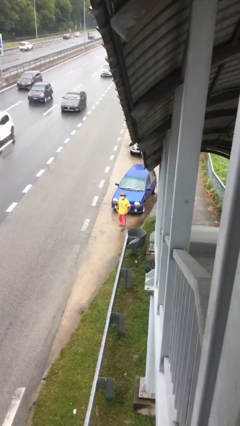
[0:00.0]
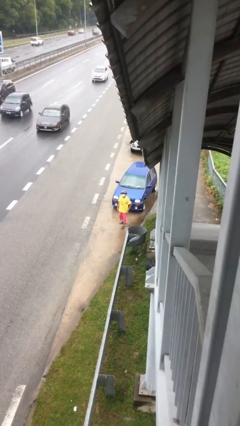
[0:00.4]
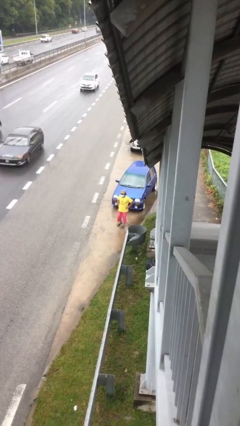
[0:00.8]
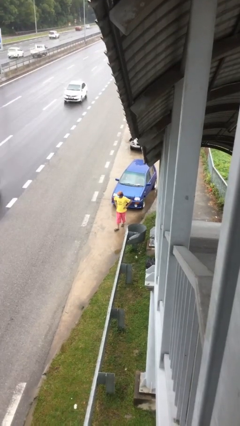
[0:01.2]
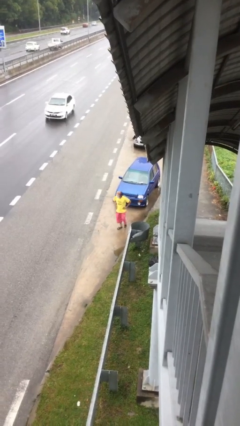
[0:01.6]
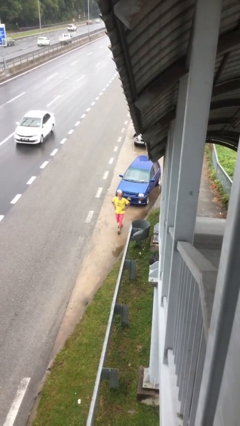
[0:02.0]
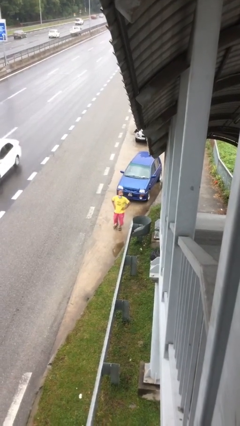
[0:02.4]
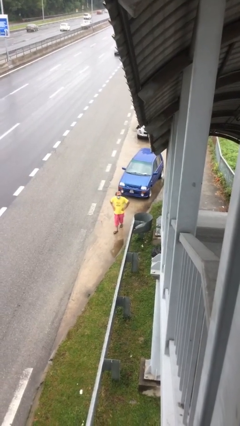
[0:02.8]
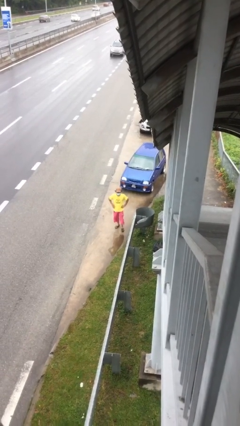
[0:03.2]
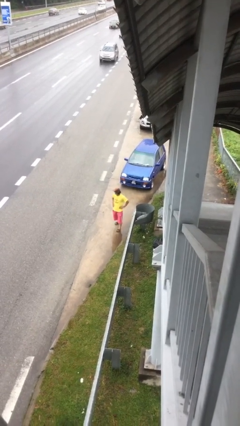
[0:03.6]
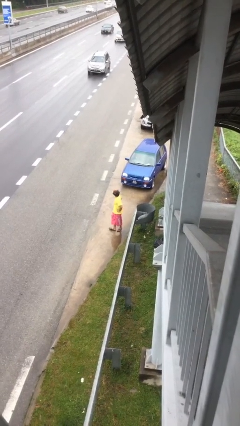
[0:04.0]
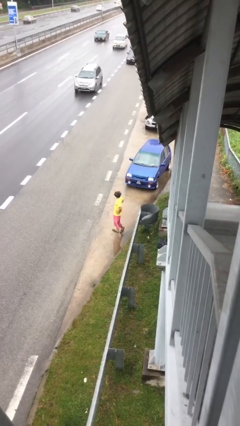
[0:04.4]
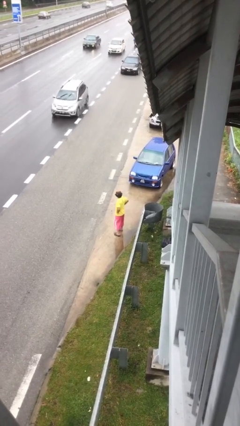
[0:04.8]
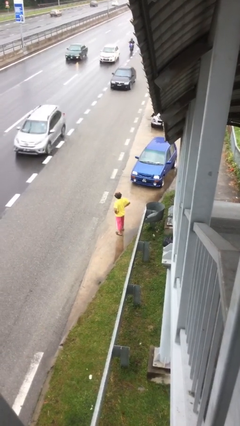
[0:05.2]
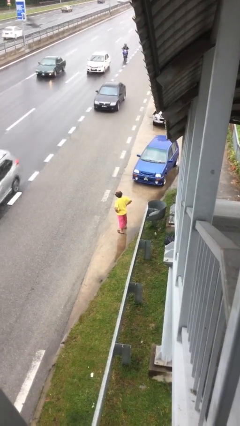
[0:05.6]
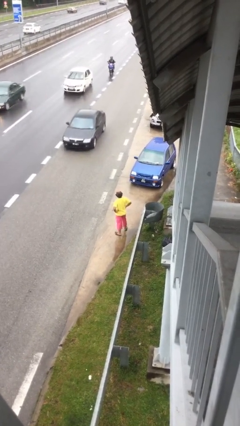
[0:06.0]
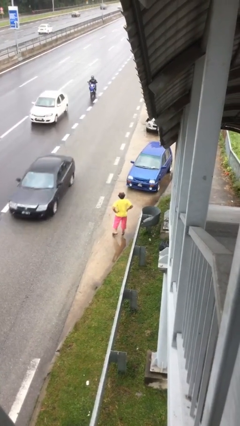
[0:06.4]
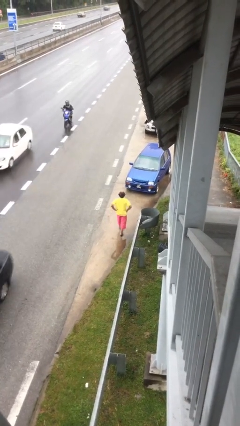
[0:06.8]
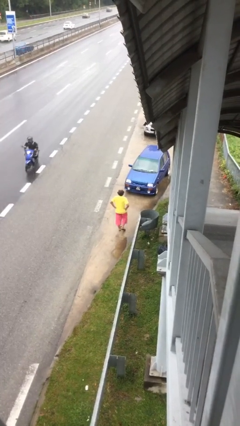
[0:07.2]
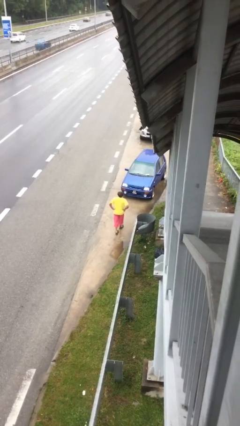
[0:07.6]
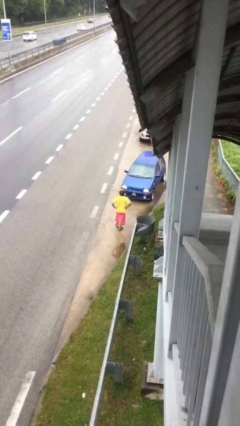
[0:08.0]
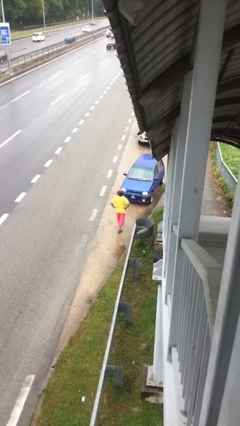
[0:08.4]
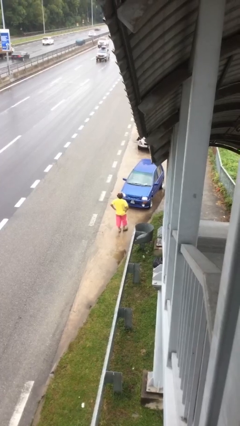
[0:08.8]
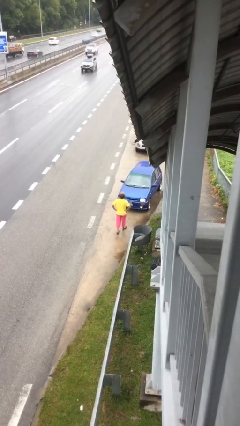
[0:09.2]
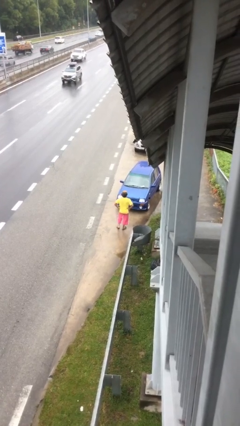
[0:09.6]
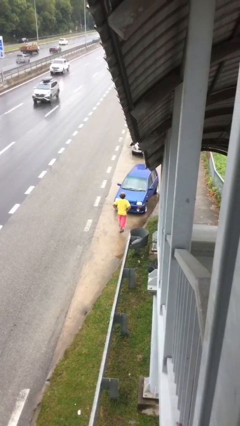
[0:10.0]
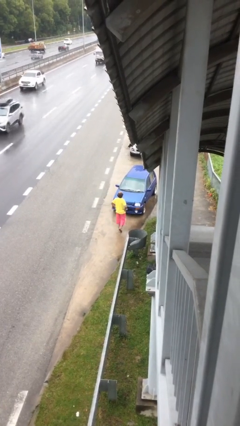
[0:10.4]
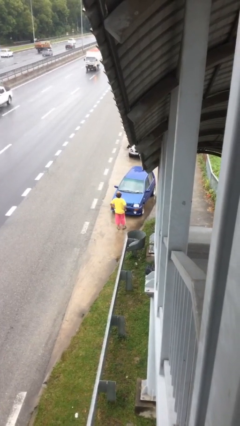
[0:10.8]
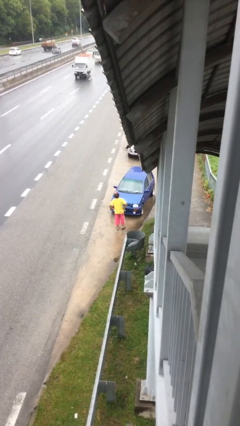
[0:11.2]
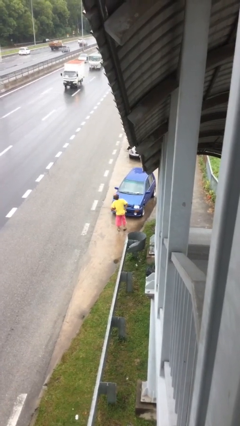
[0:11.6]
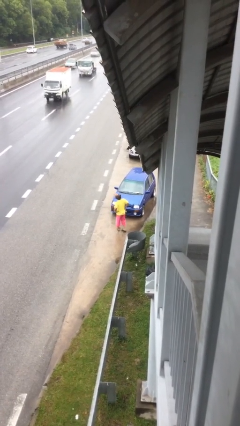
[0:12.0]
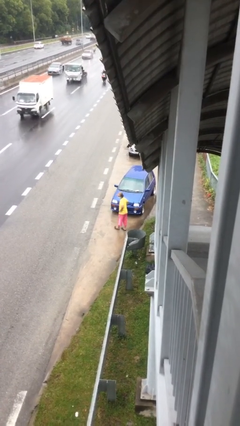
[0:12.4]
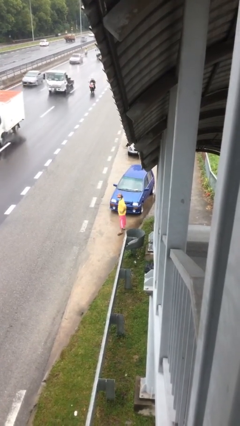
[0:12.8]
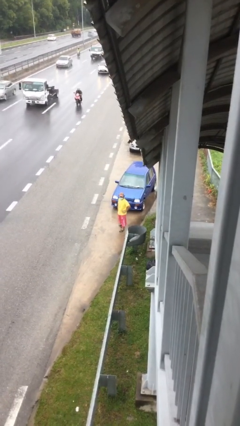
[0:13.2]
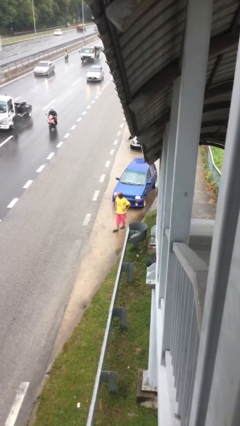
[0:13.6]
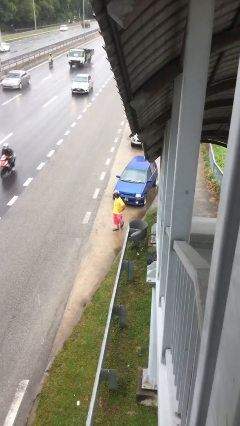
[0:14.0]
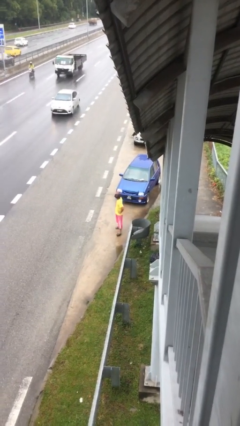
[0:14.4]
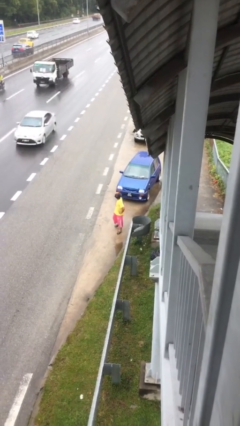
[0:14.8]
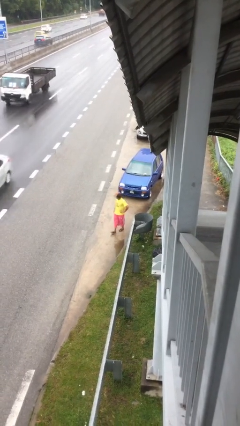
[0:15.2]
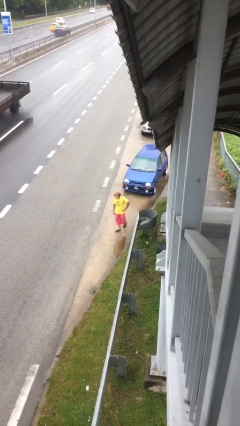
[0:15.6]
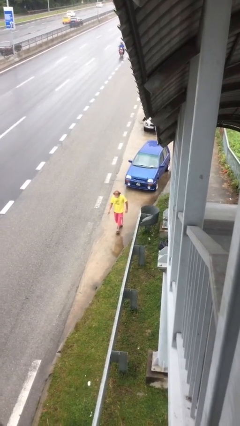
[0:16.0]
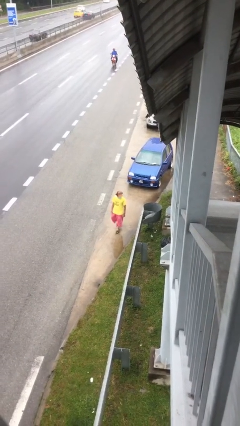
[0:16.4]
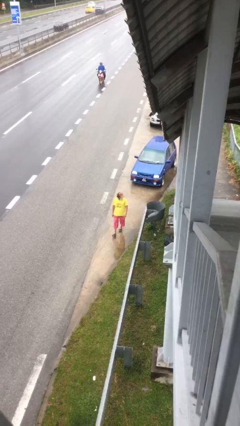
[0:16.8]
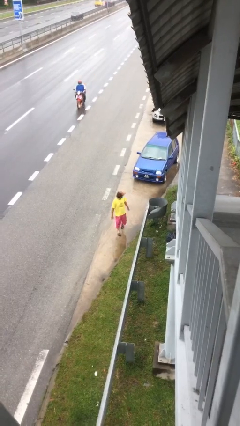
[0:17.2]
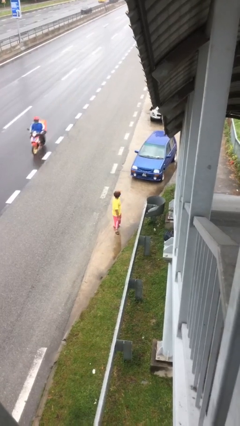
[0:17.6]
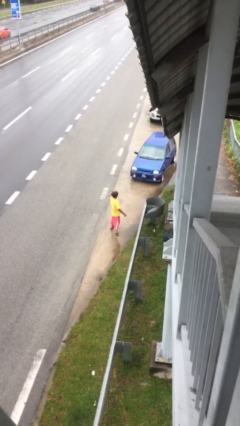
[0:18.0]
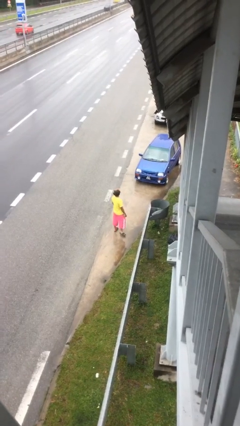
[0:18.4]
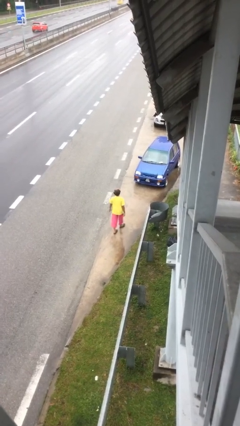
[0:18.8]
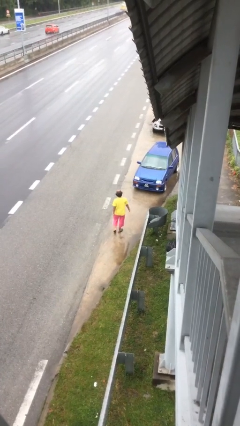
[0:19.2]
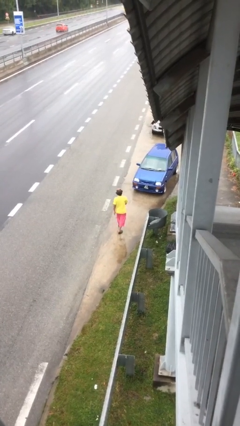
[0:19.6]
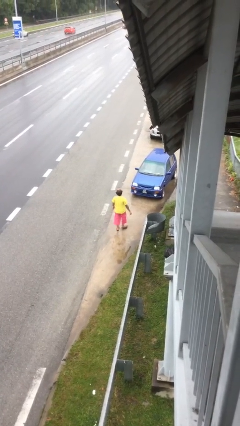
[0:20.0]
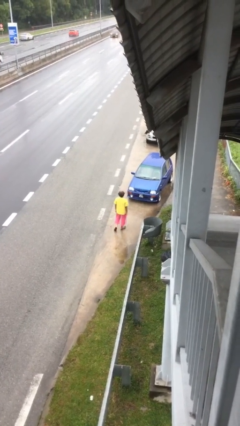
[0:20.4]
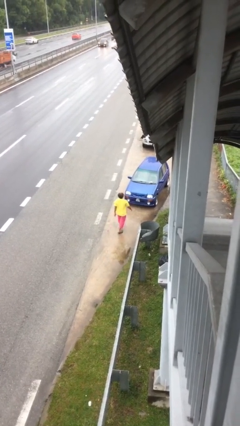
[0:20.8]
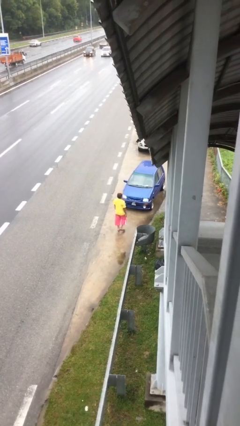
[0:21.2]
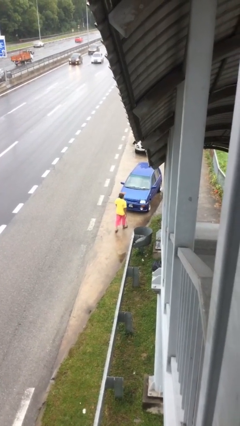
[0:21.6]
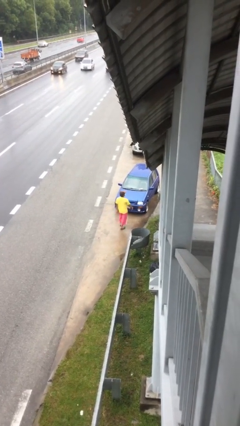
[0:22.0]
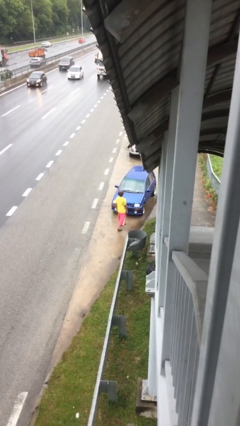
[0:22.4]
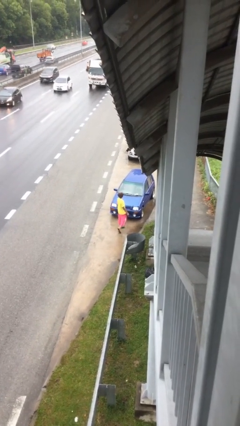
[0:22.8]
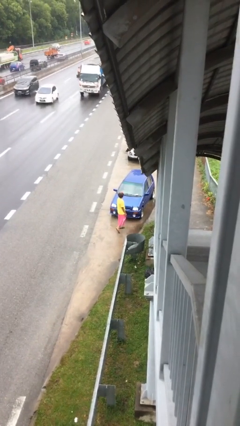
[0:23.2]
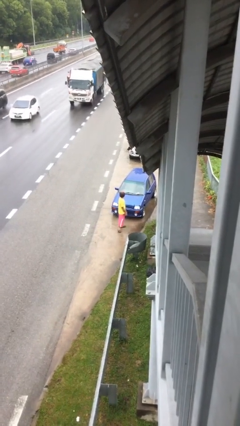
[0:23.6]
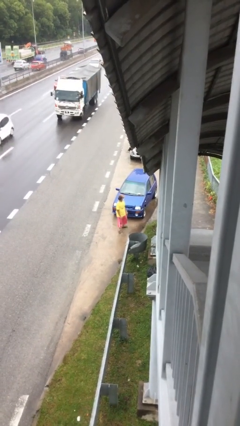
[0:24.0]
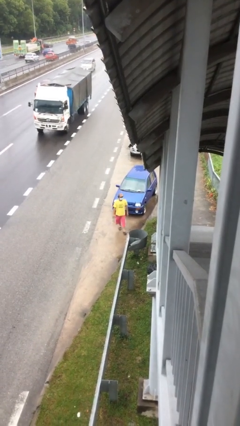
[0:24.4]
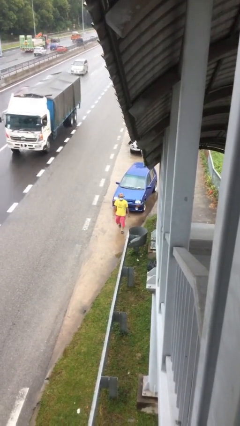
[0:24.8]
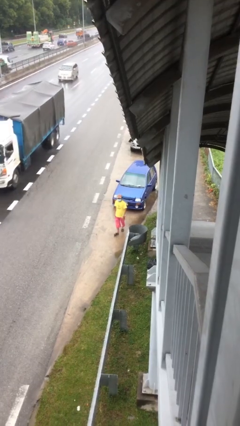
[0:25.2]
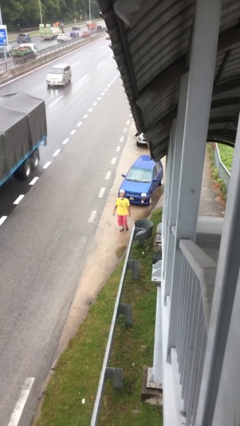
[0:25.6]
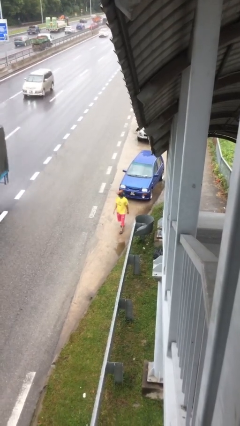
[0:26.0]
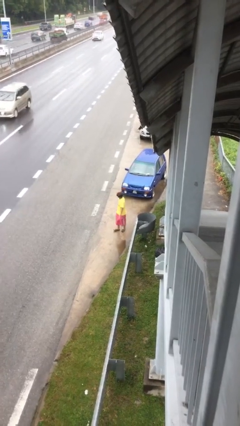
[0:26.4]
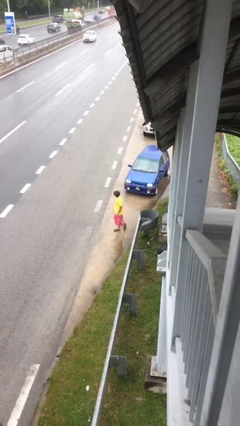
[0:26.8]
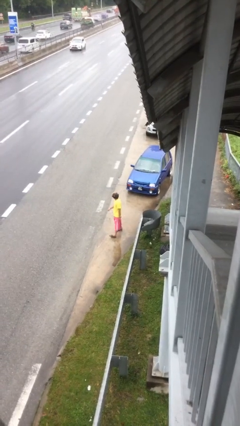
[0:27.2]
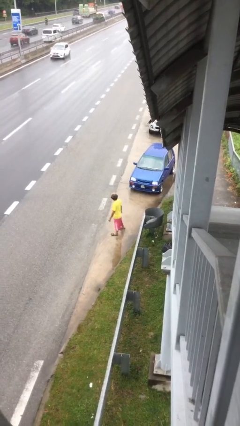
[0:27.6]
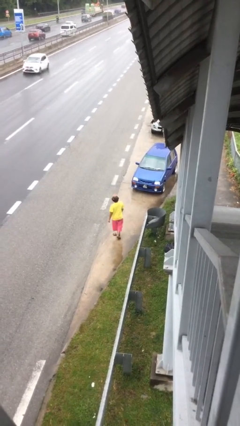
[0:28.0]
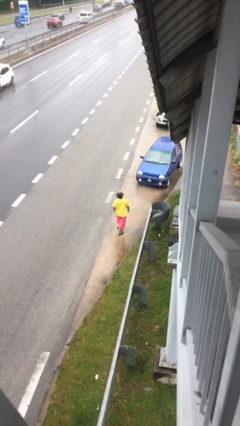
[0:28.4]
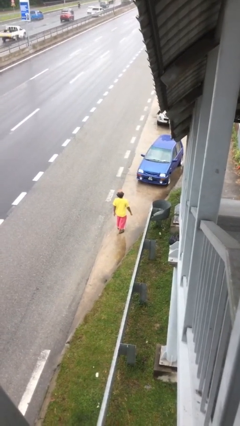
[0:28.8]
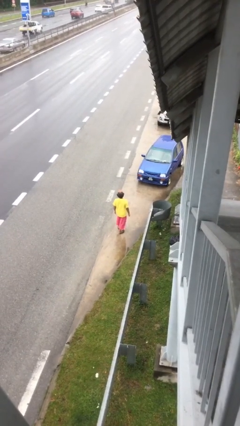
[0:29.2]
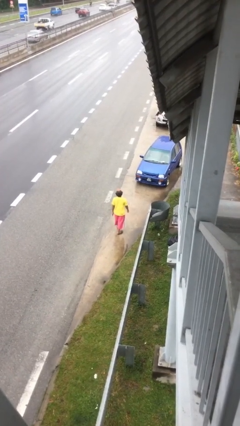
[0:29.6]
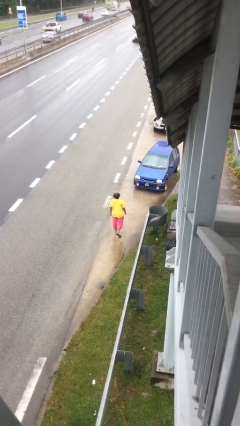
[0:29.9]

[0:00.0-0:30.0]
person walks

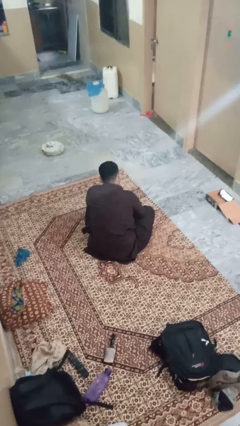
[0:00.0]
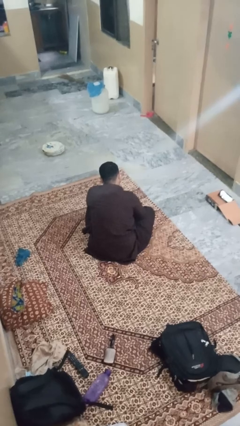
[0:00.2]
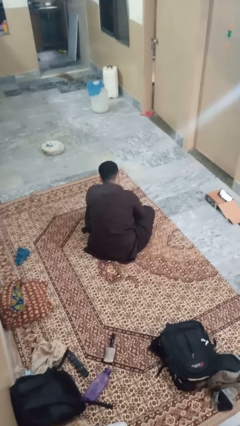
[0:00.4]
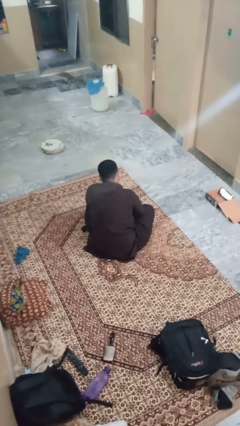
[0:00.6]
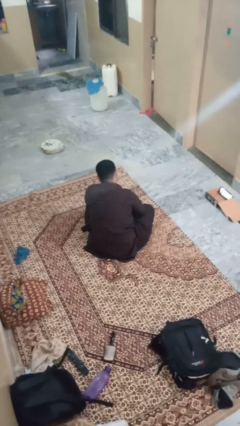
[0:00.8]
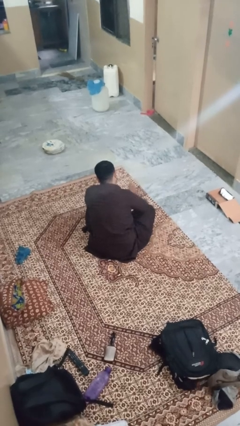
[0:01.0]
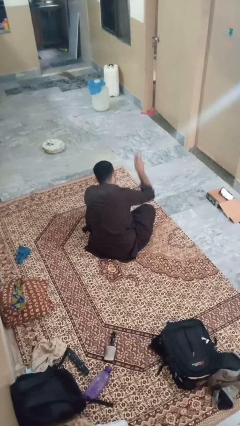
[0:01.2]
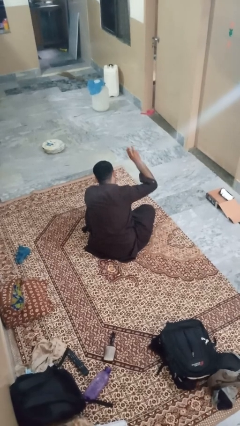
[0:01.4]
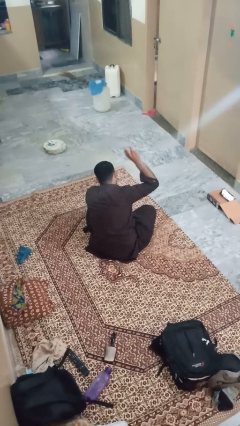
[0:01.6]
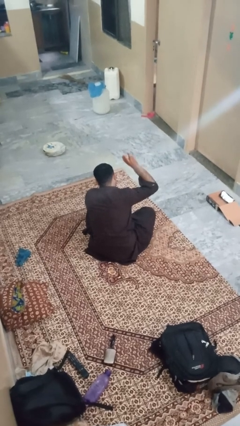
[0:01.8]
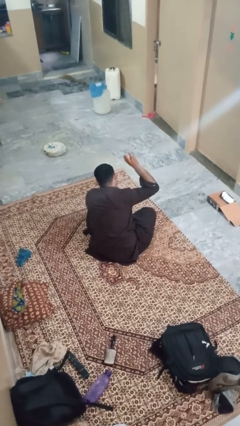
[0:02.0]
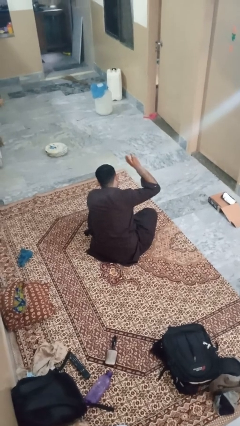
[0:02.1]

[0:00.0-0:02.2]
person gestures number three

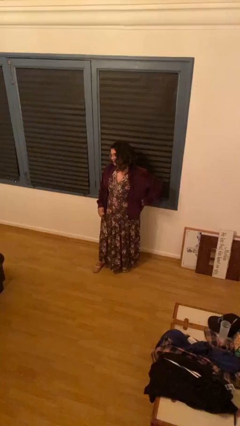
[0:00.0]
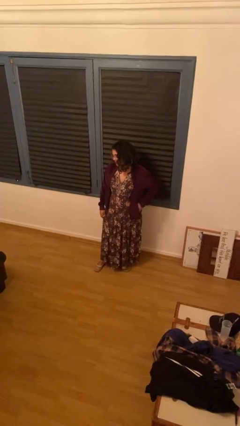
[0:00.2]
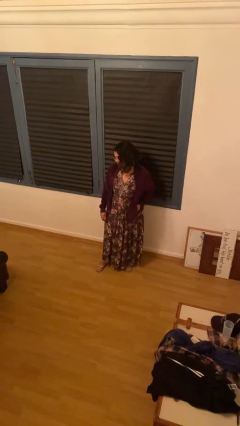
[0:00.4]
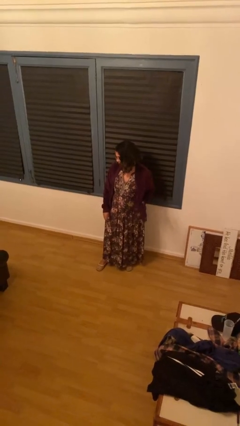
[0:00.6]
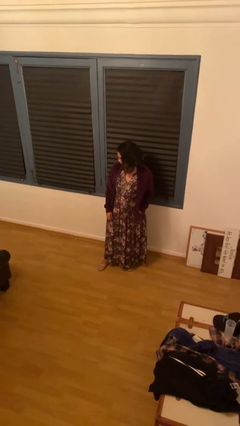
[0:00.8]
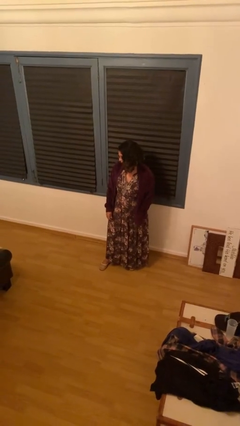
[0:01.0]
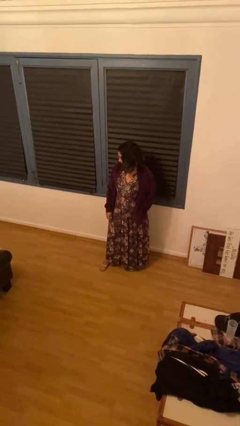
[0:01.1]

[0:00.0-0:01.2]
person puts phone into pocket
